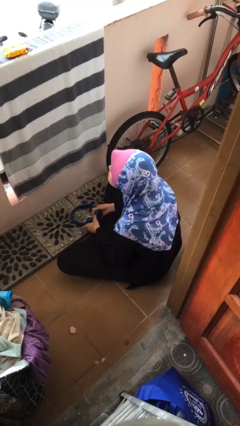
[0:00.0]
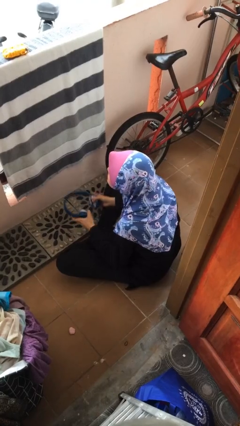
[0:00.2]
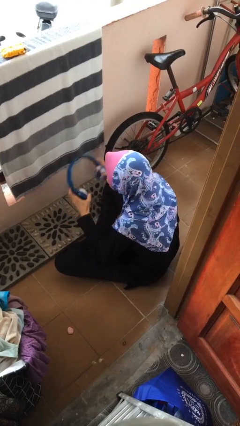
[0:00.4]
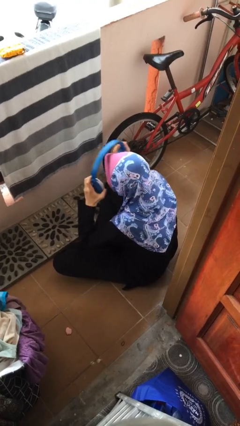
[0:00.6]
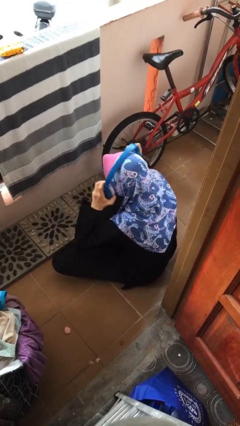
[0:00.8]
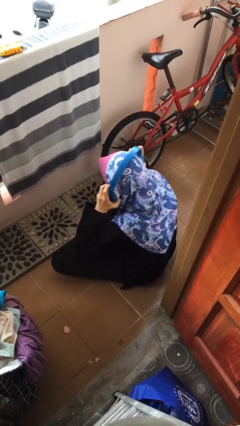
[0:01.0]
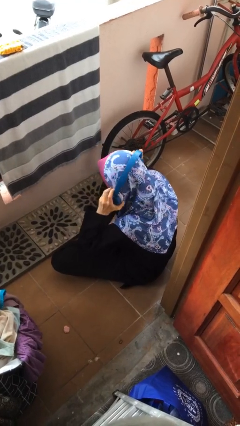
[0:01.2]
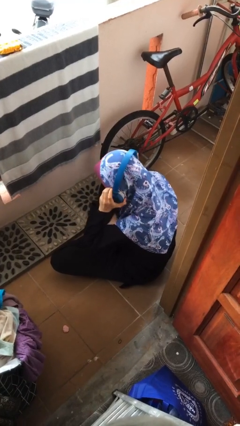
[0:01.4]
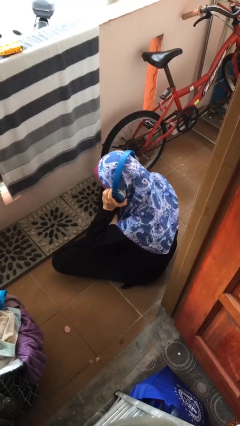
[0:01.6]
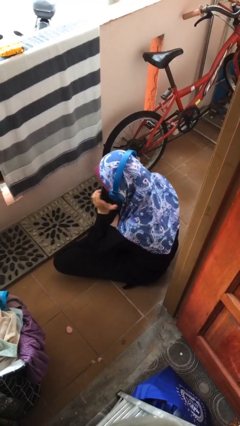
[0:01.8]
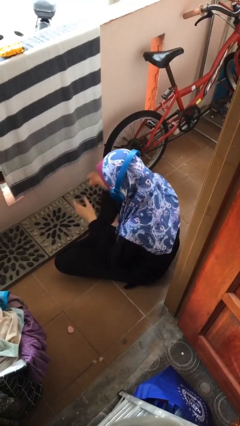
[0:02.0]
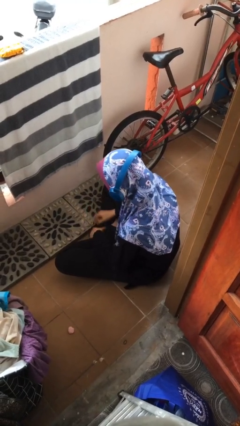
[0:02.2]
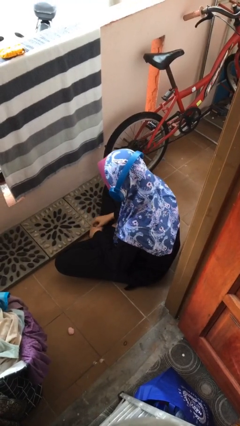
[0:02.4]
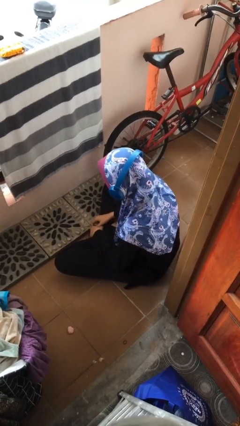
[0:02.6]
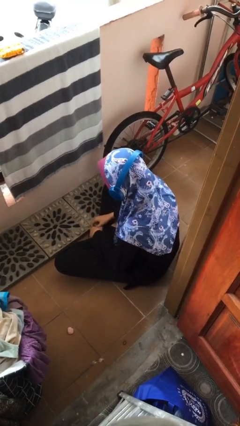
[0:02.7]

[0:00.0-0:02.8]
person puts on headphones

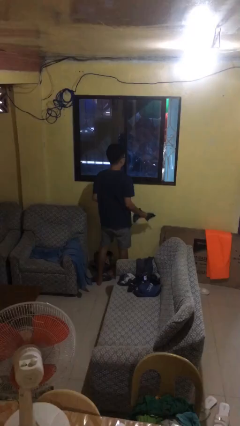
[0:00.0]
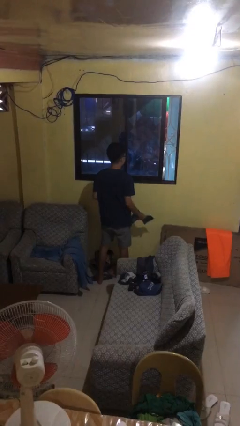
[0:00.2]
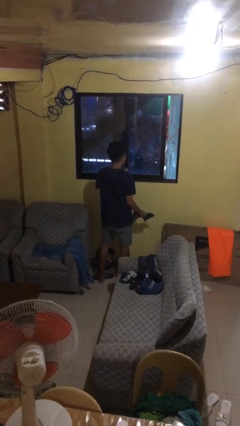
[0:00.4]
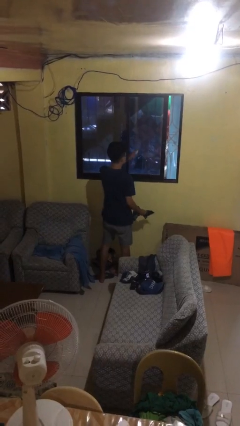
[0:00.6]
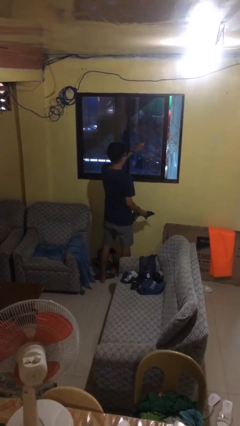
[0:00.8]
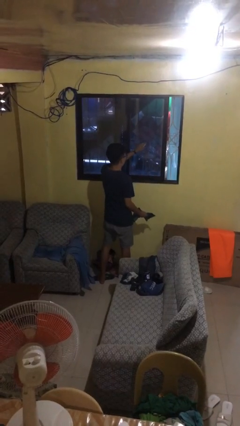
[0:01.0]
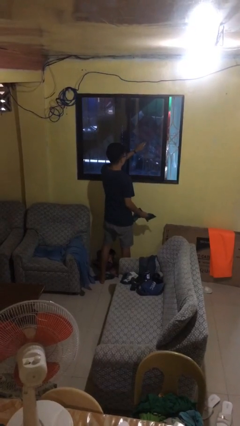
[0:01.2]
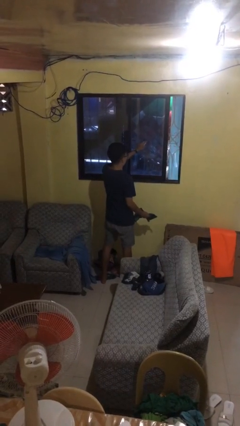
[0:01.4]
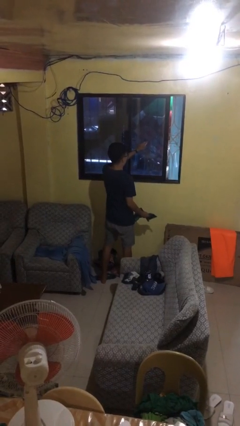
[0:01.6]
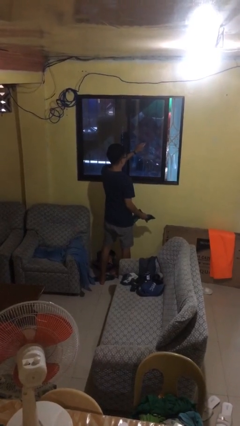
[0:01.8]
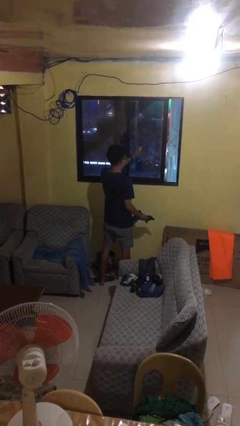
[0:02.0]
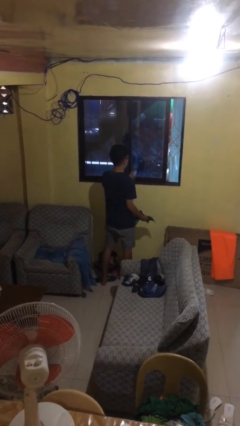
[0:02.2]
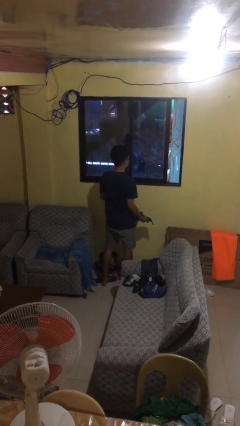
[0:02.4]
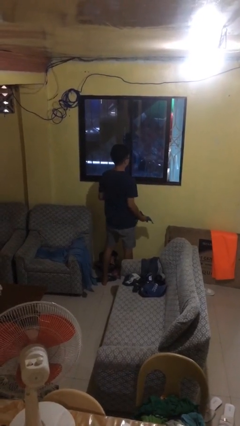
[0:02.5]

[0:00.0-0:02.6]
person sprays from bottle

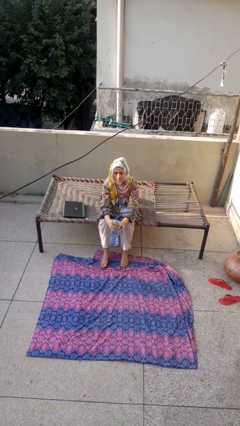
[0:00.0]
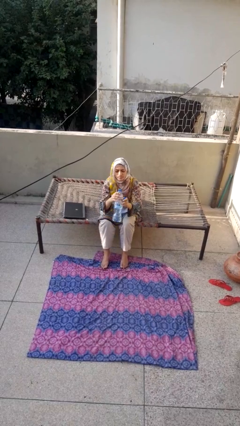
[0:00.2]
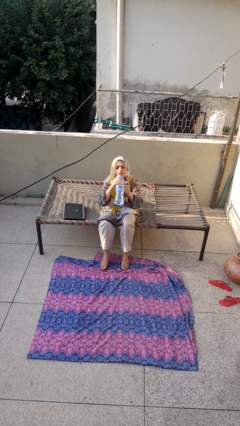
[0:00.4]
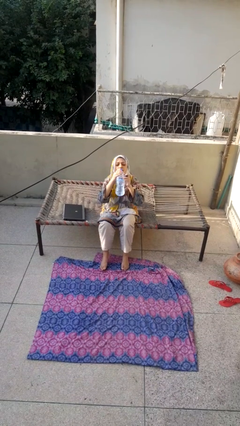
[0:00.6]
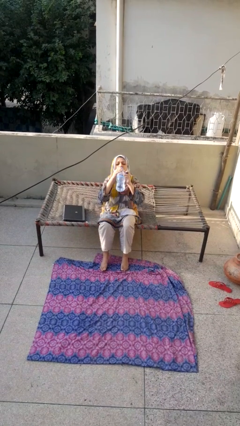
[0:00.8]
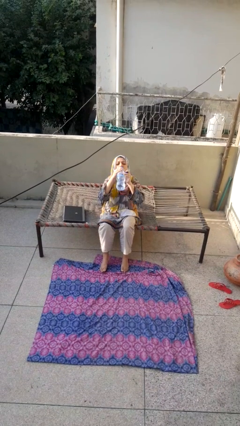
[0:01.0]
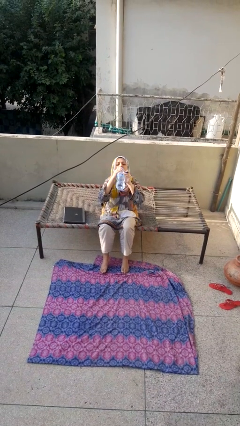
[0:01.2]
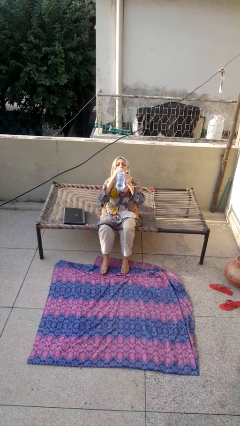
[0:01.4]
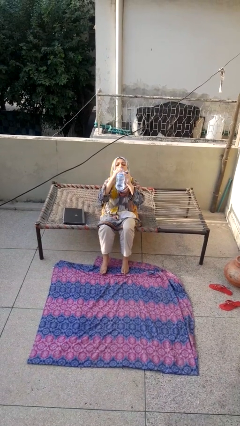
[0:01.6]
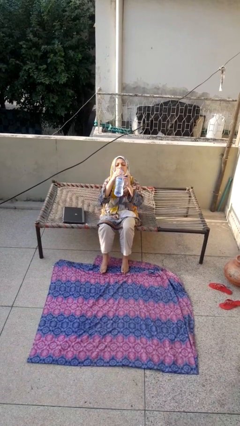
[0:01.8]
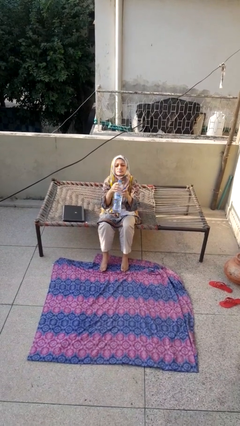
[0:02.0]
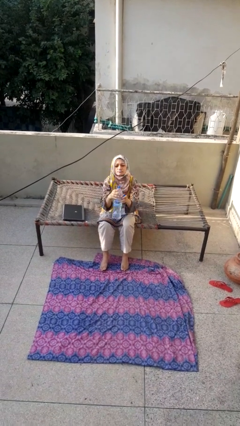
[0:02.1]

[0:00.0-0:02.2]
person drinks from bottle

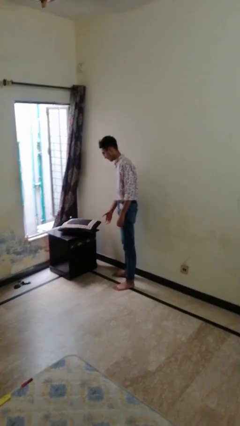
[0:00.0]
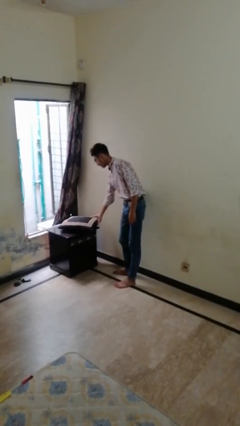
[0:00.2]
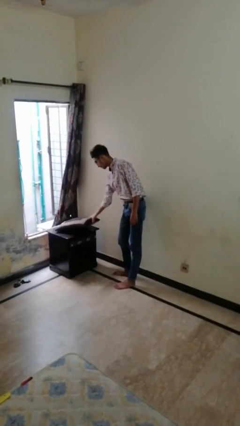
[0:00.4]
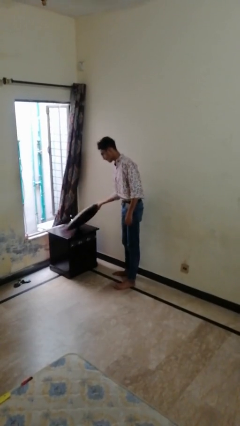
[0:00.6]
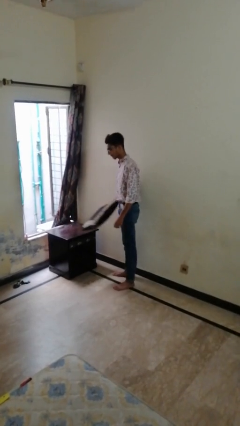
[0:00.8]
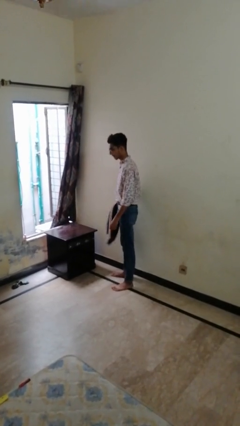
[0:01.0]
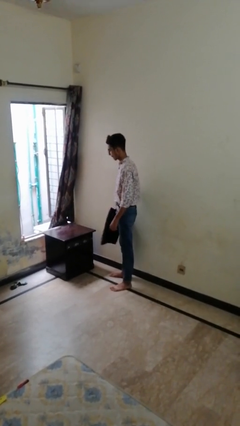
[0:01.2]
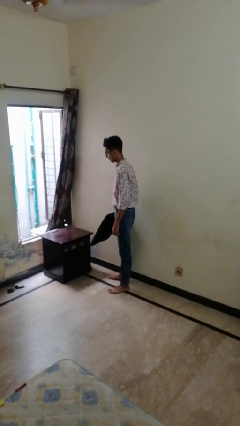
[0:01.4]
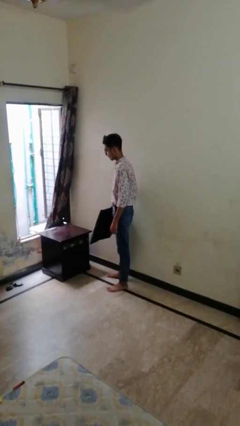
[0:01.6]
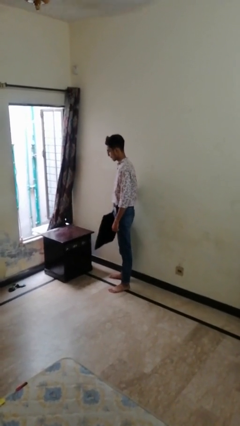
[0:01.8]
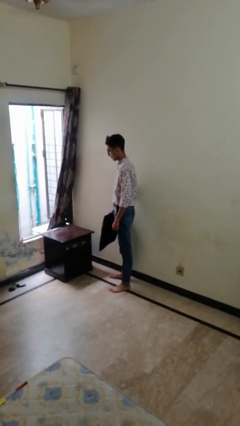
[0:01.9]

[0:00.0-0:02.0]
person picks up object from table

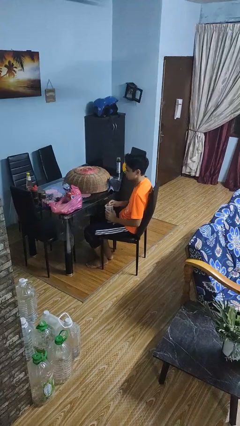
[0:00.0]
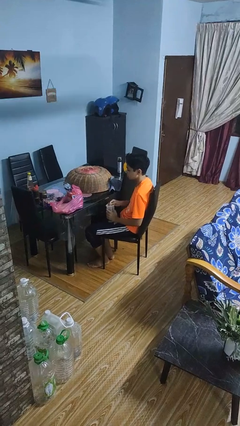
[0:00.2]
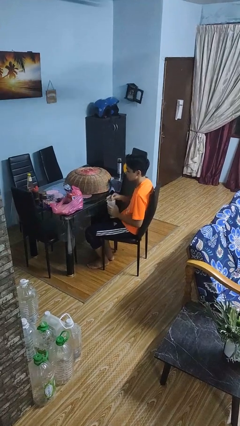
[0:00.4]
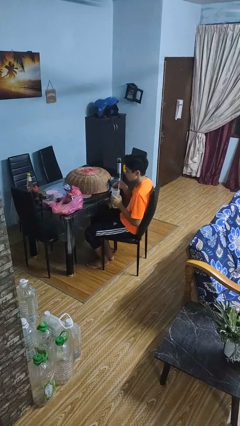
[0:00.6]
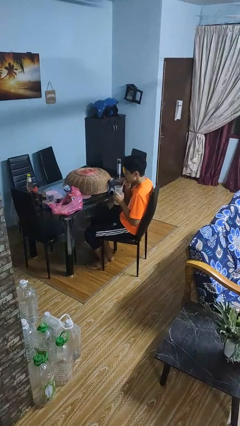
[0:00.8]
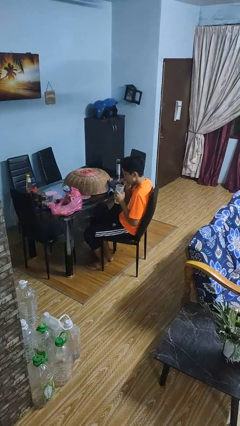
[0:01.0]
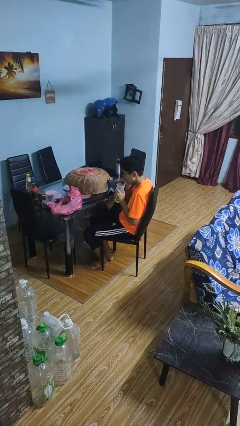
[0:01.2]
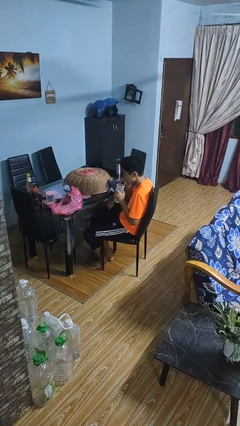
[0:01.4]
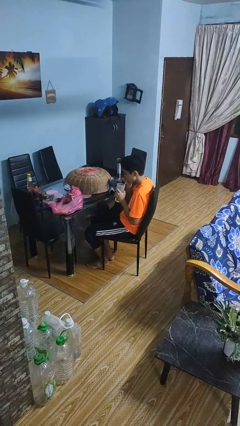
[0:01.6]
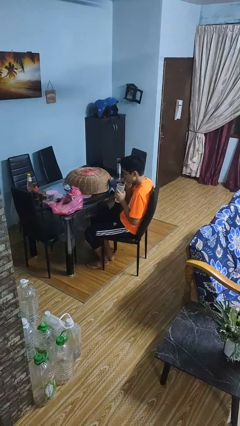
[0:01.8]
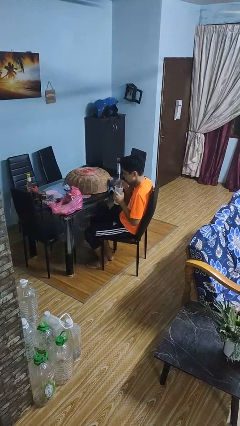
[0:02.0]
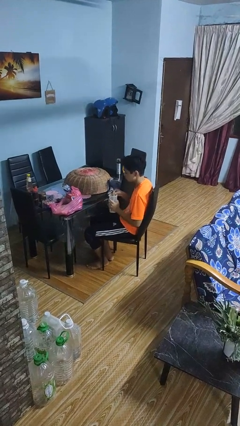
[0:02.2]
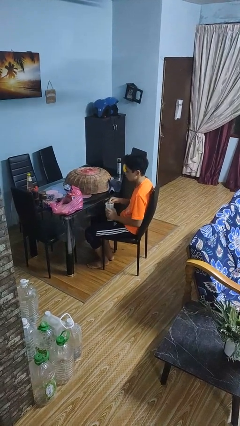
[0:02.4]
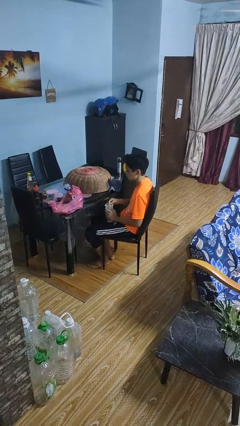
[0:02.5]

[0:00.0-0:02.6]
person drinks from straw

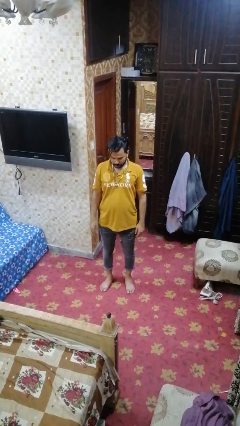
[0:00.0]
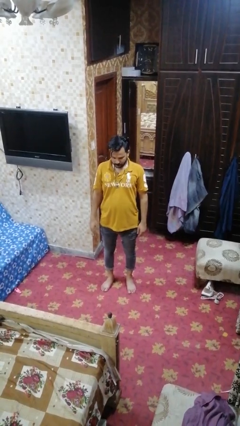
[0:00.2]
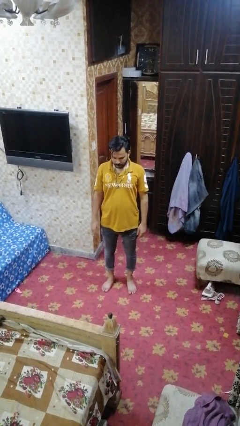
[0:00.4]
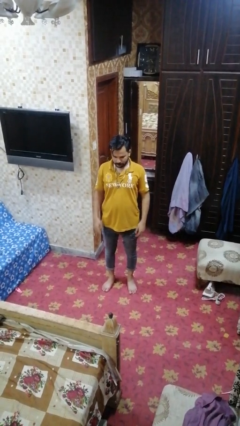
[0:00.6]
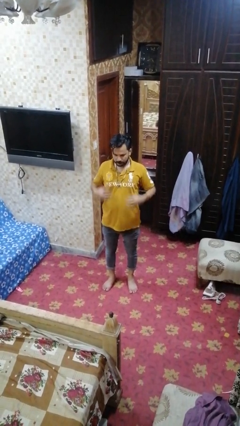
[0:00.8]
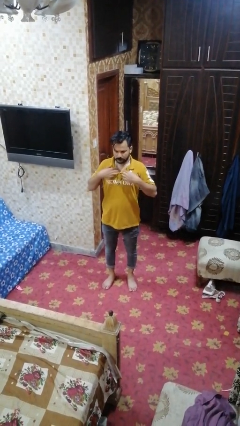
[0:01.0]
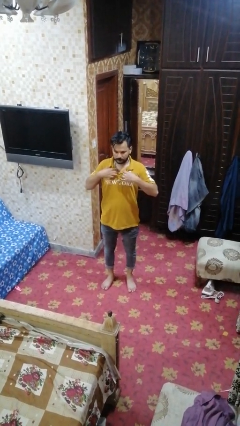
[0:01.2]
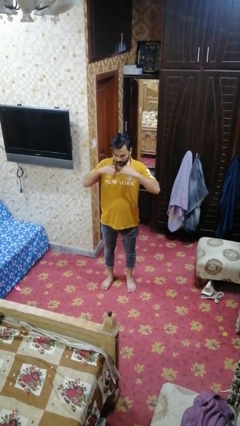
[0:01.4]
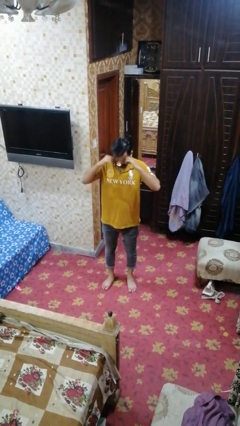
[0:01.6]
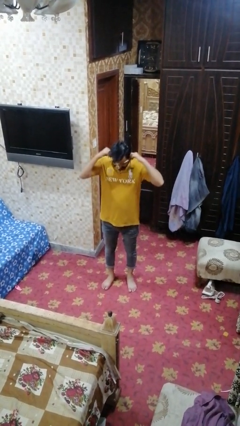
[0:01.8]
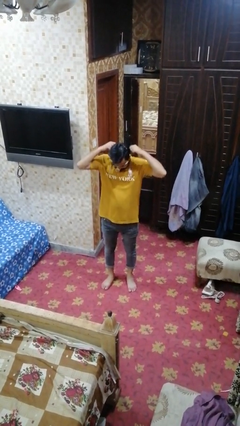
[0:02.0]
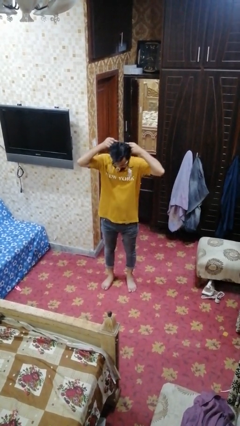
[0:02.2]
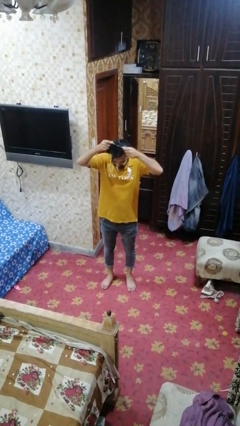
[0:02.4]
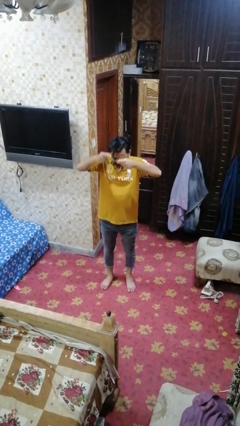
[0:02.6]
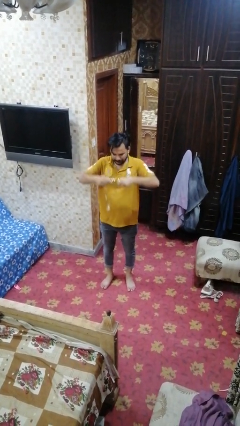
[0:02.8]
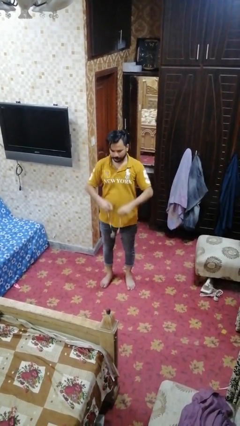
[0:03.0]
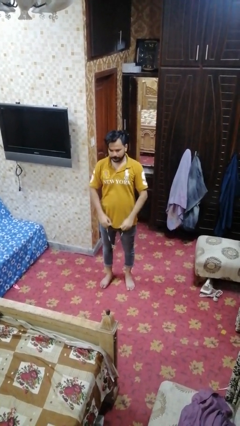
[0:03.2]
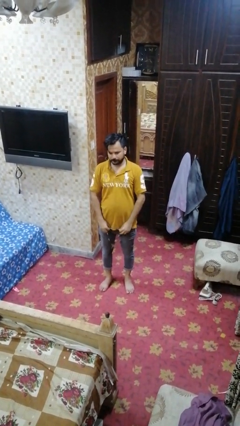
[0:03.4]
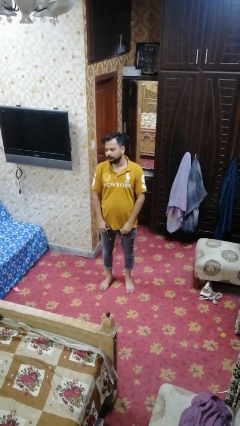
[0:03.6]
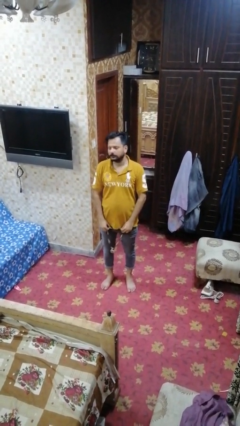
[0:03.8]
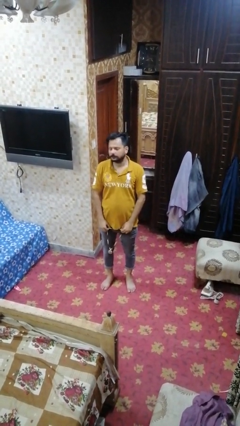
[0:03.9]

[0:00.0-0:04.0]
person takes off necklace

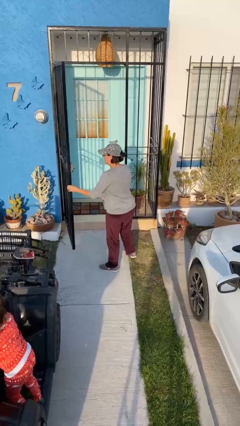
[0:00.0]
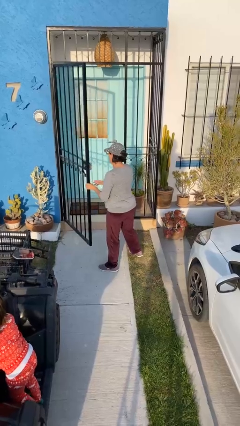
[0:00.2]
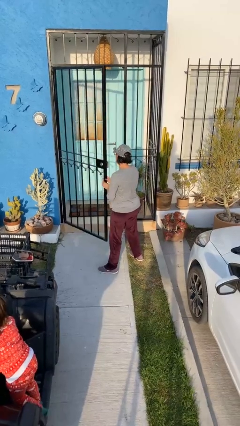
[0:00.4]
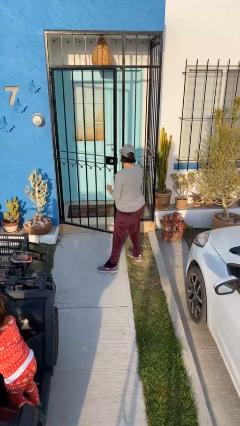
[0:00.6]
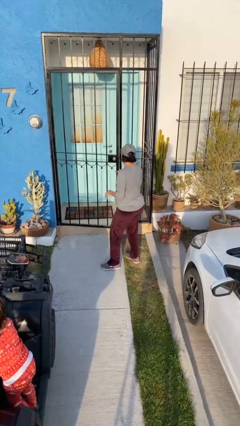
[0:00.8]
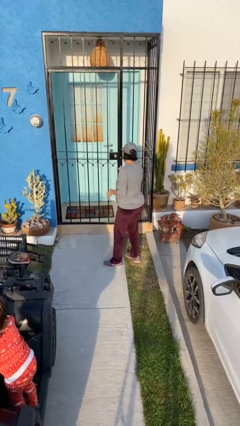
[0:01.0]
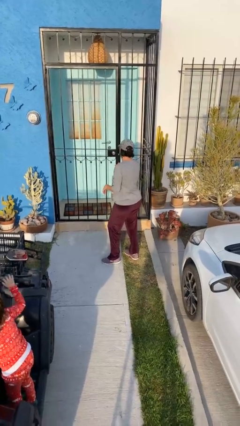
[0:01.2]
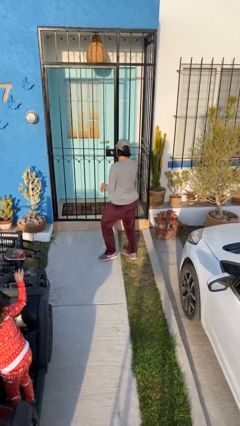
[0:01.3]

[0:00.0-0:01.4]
person closes facility door
